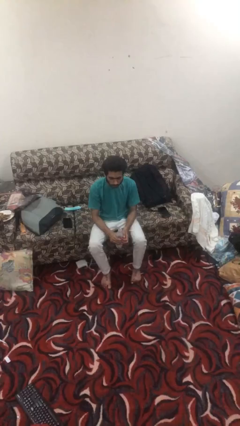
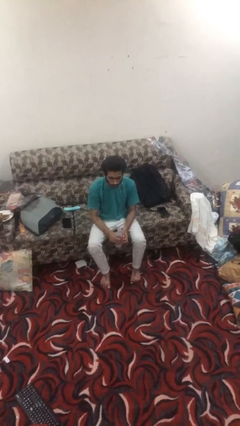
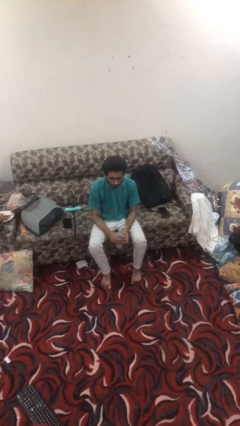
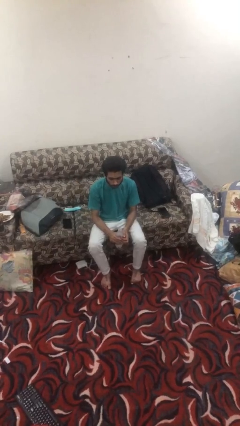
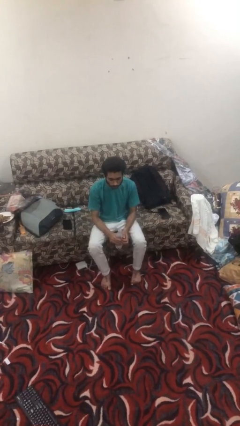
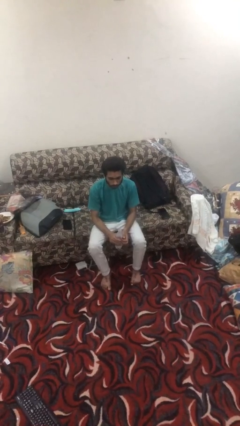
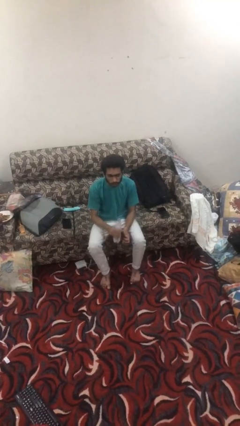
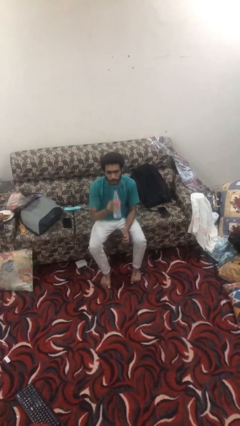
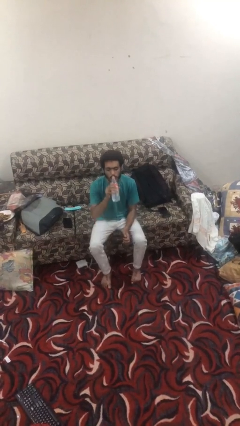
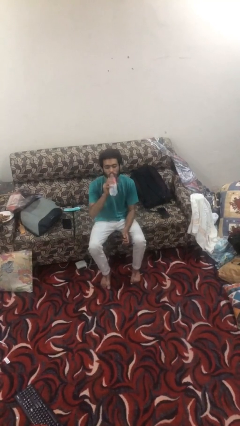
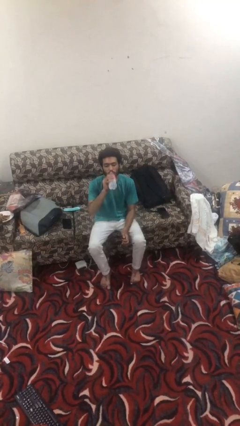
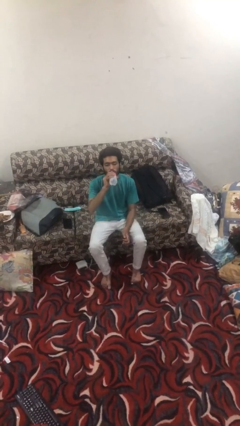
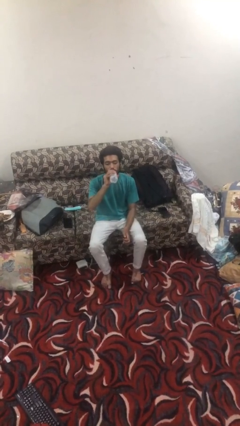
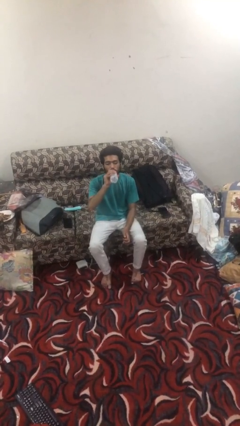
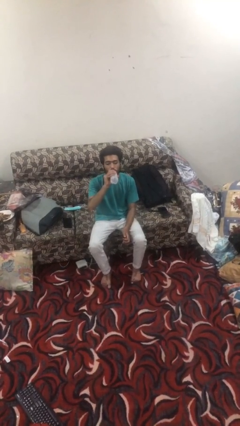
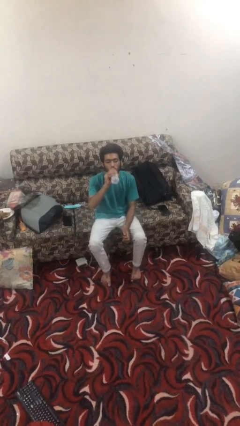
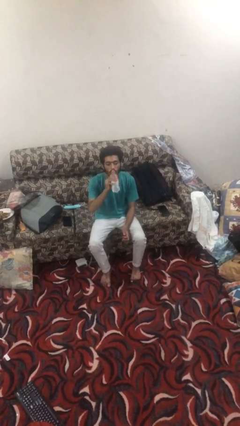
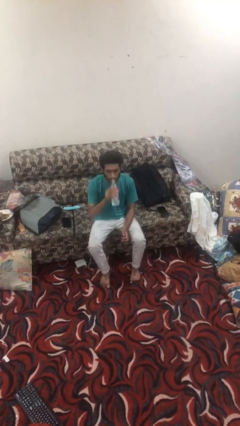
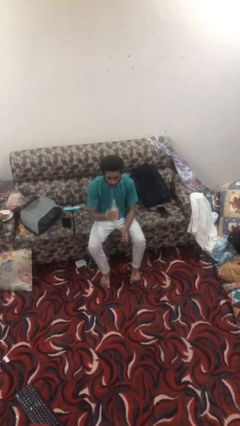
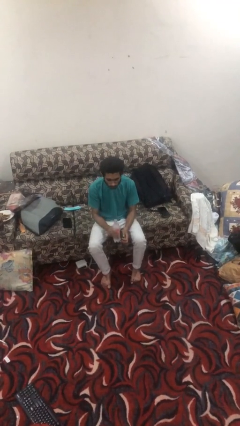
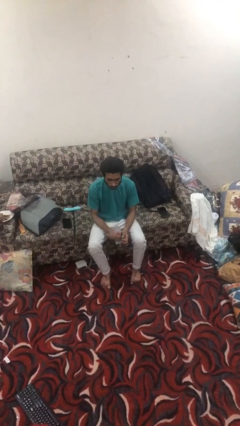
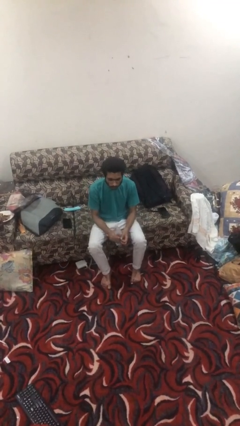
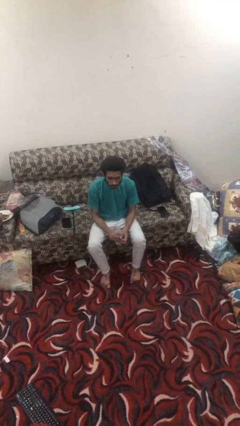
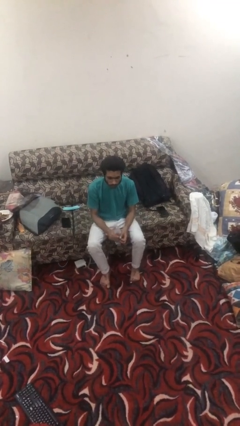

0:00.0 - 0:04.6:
person drinks from bottle

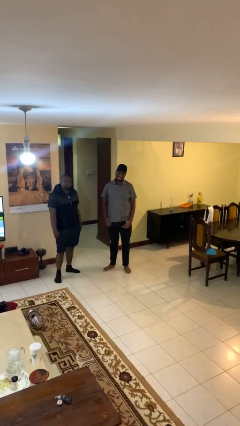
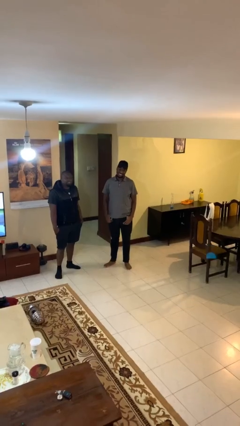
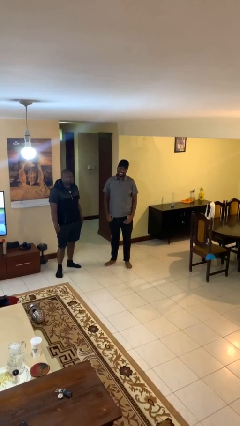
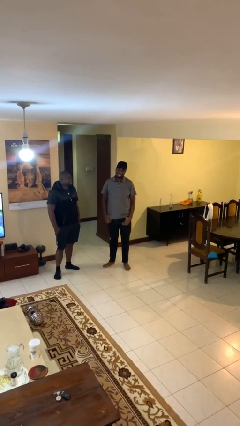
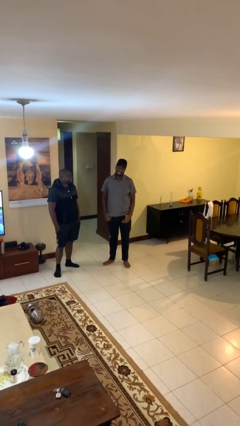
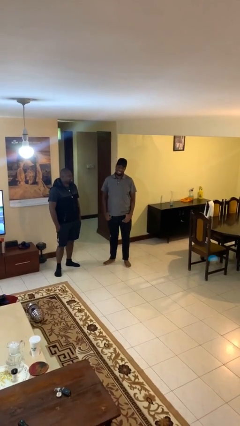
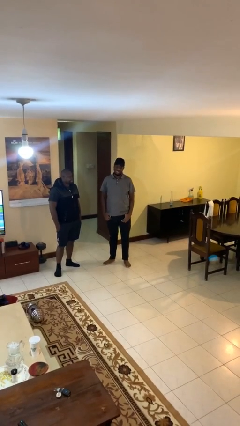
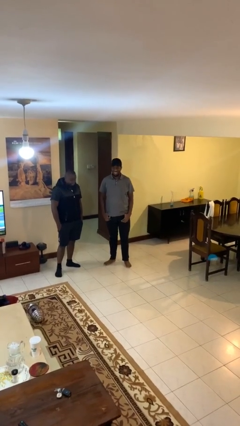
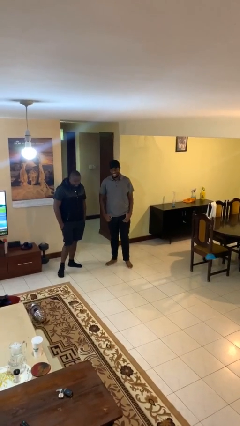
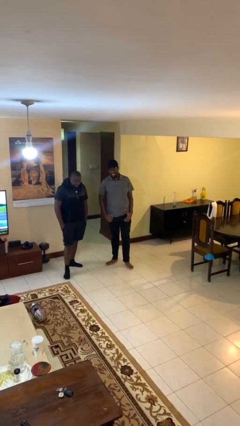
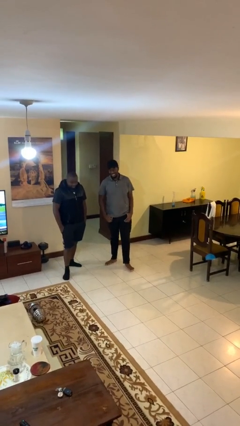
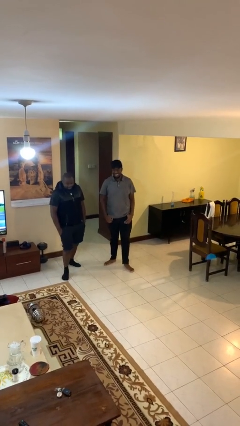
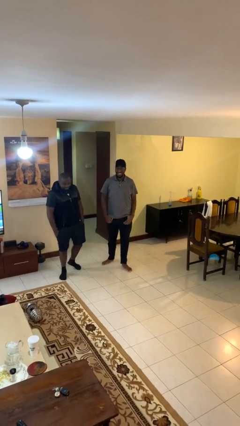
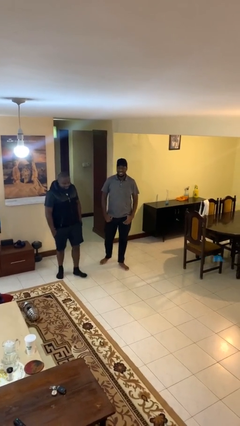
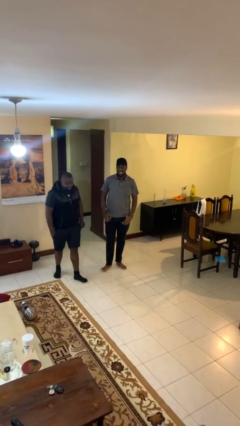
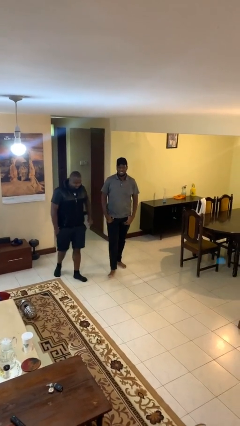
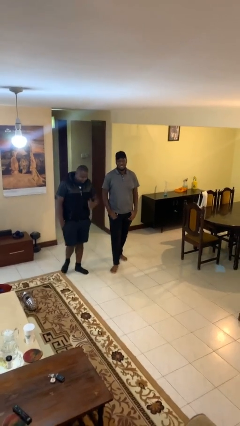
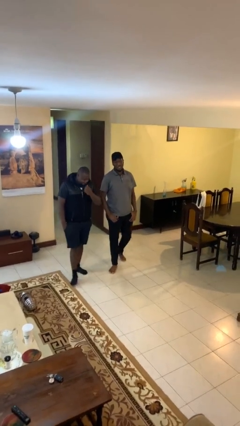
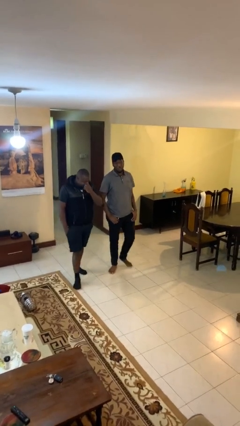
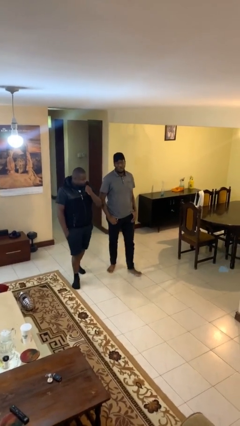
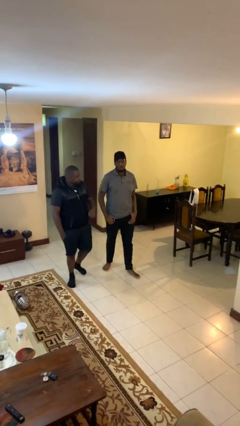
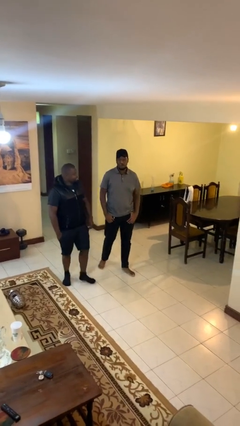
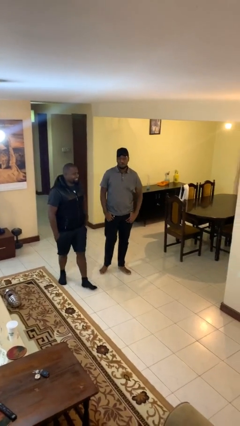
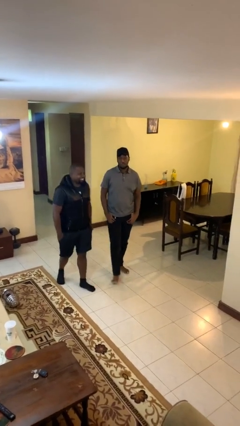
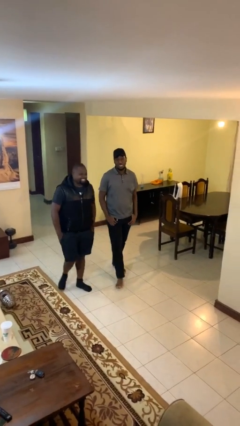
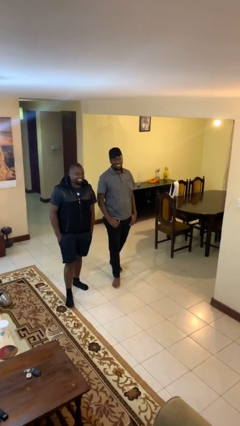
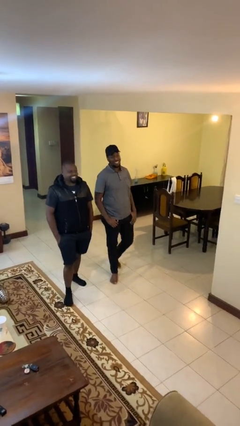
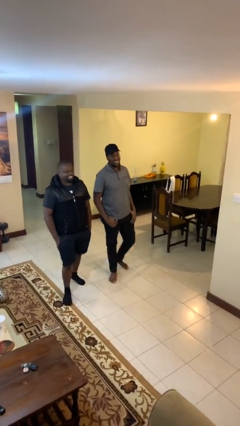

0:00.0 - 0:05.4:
person talks to person

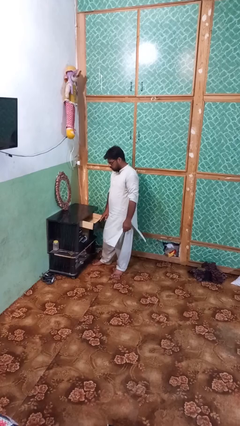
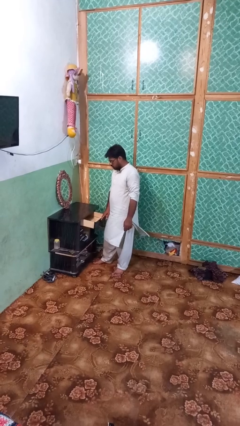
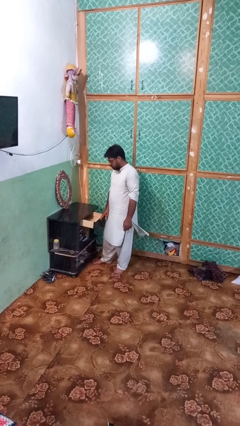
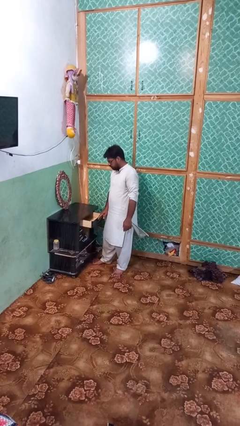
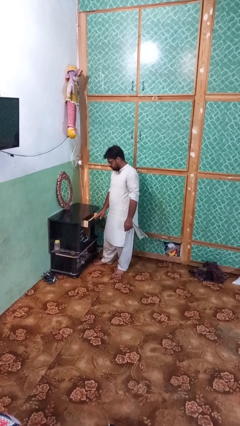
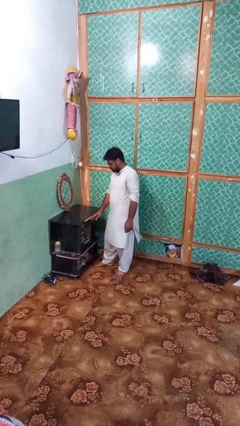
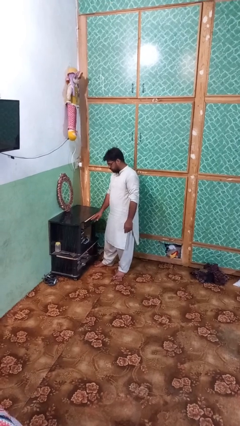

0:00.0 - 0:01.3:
person closes dresser drawer

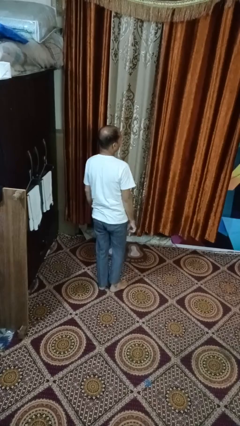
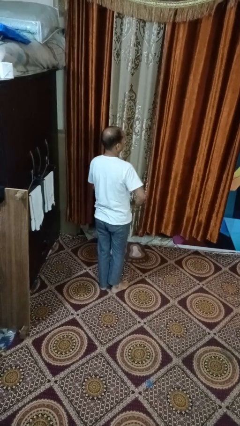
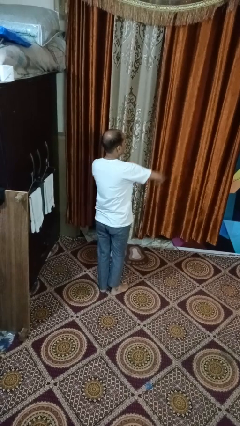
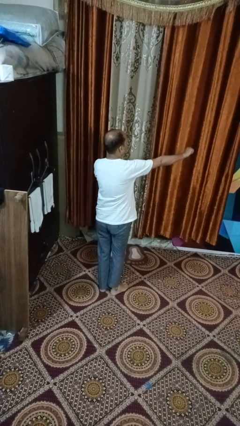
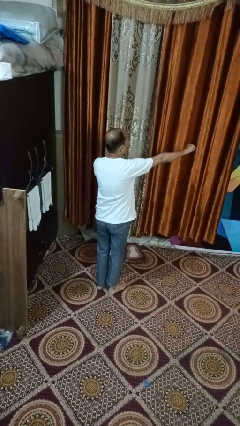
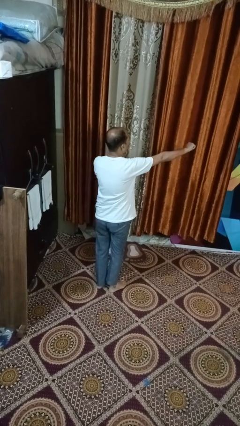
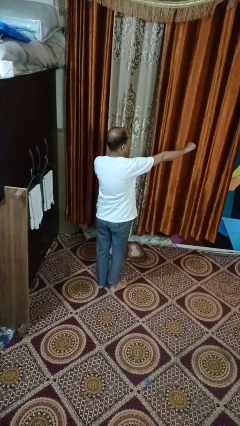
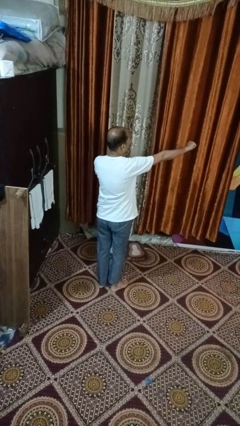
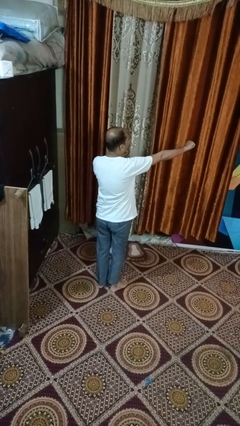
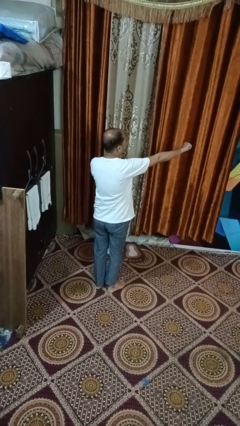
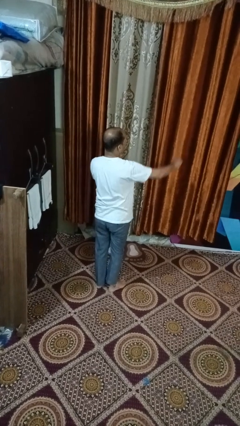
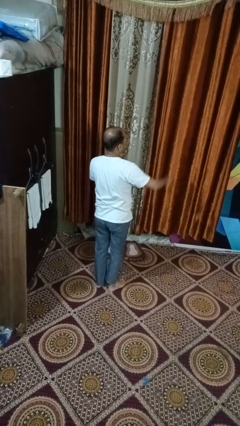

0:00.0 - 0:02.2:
person karate chop

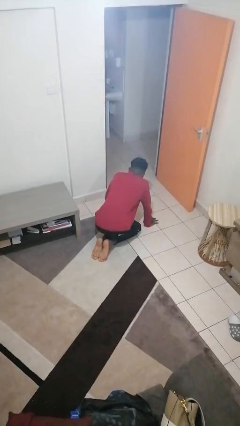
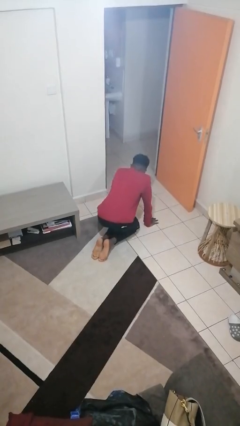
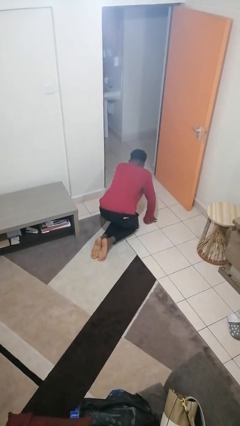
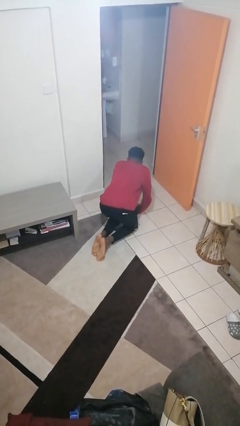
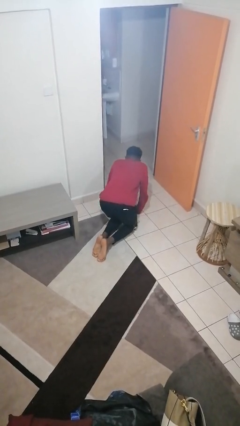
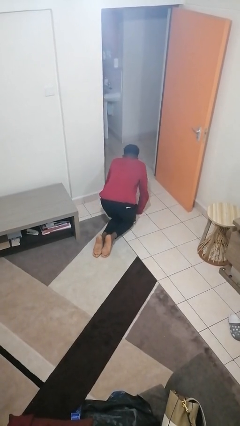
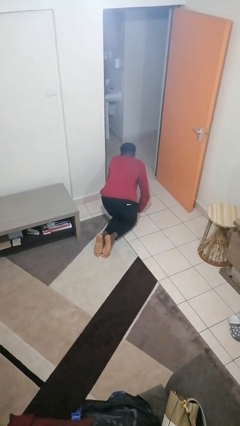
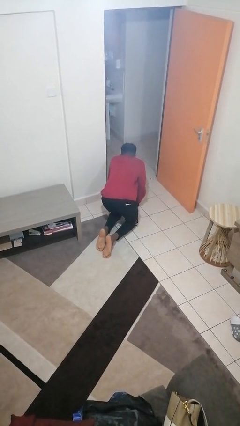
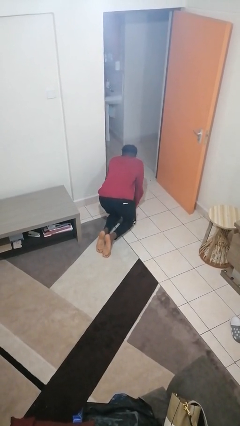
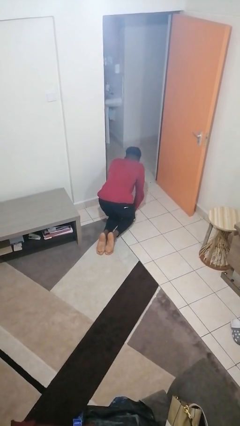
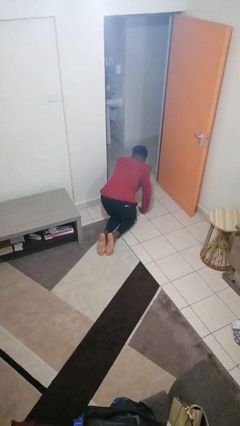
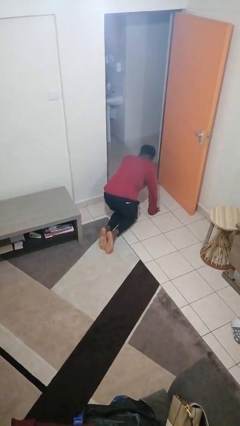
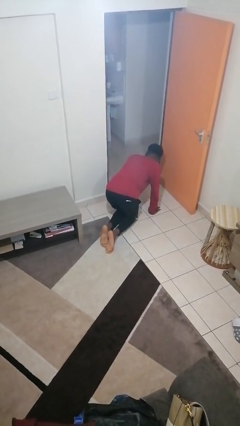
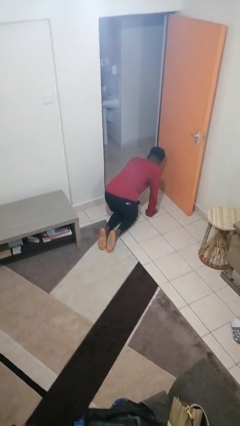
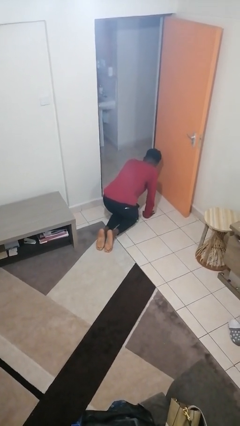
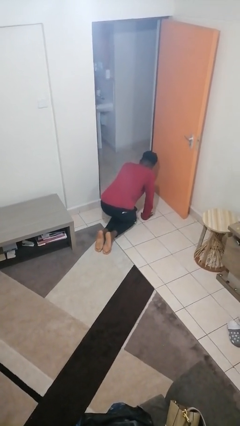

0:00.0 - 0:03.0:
person crawls

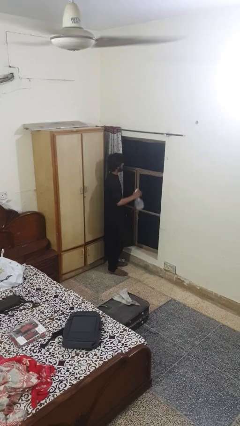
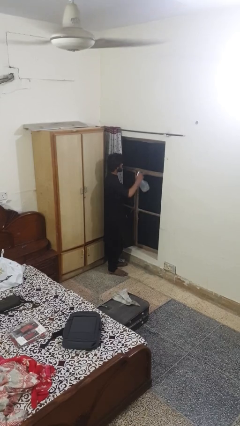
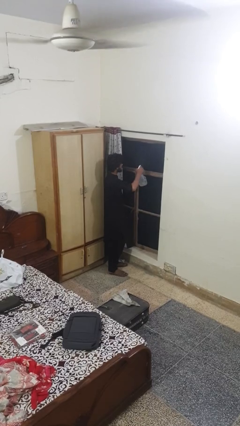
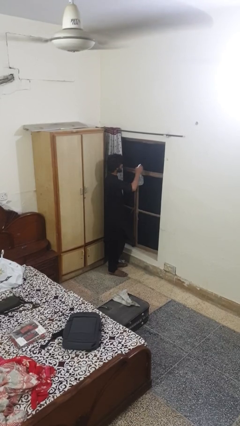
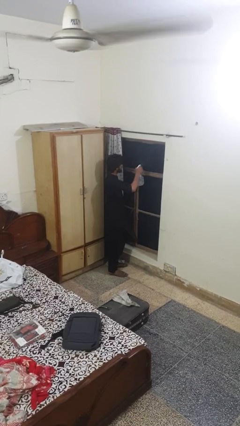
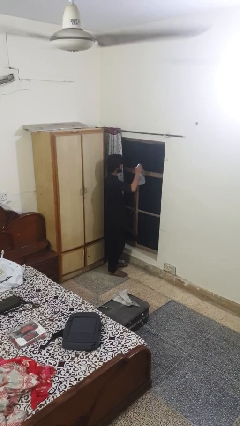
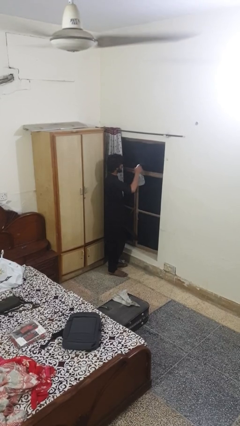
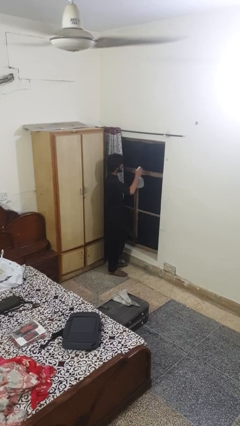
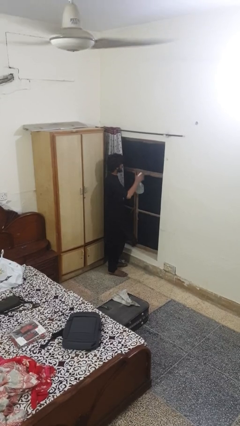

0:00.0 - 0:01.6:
person sprays from bottle
